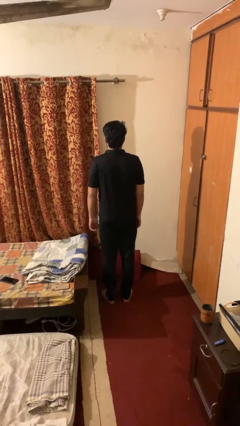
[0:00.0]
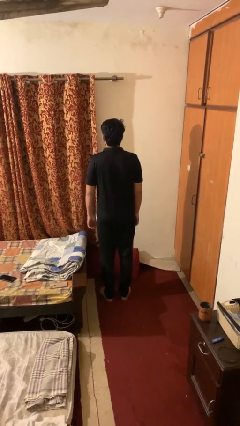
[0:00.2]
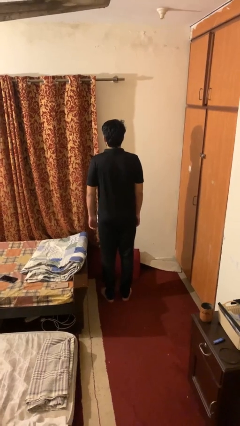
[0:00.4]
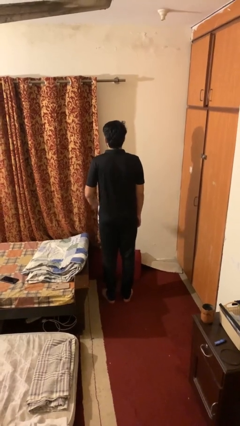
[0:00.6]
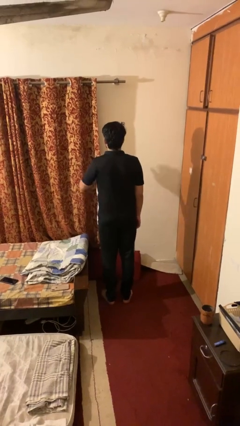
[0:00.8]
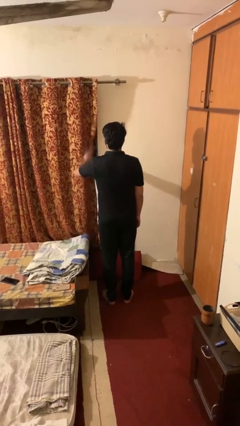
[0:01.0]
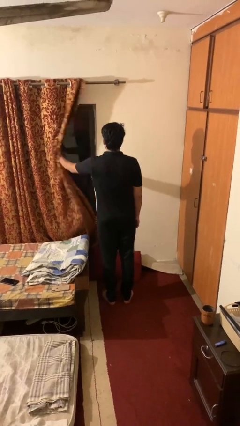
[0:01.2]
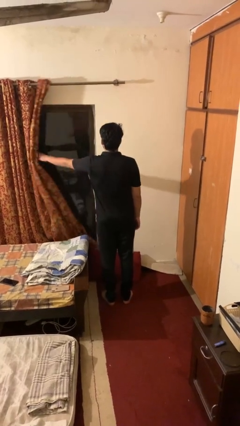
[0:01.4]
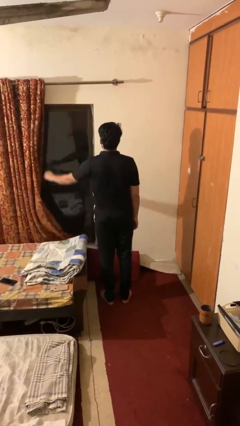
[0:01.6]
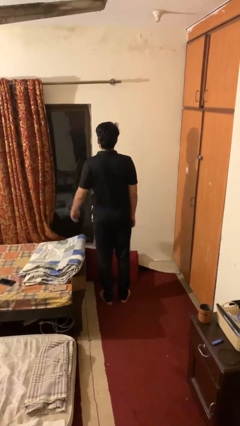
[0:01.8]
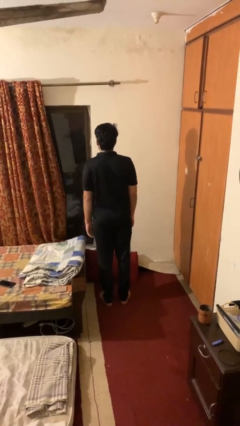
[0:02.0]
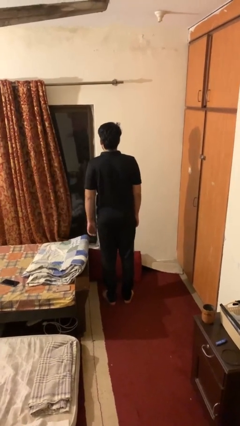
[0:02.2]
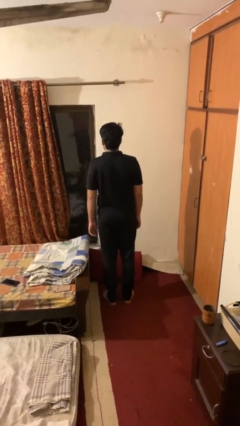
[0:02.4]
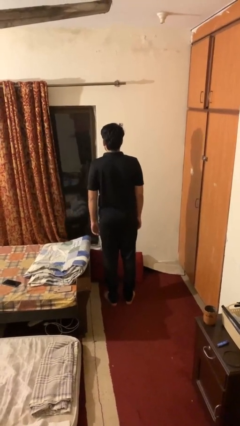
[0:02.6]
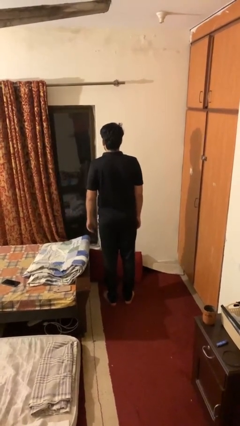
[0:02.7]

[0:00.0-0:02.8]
person opens curtains

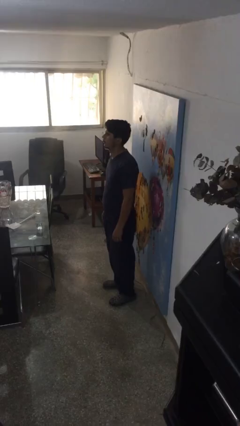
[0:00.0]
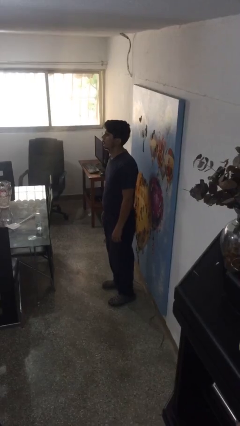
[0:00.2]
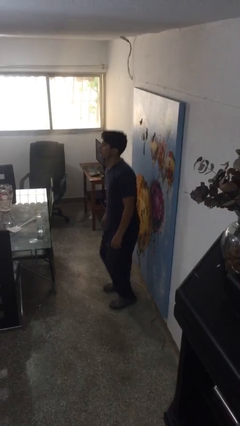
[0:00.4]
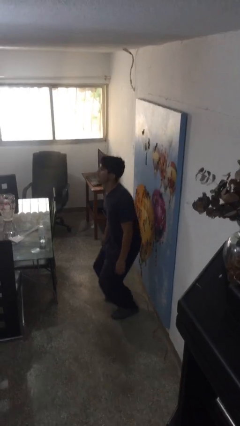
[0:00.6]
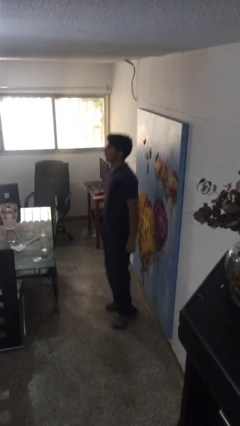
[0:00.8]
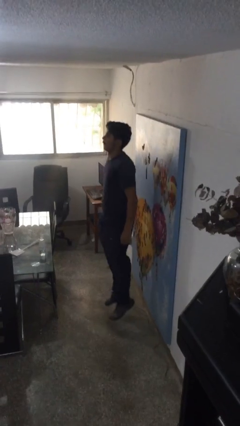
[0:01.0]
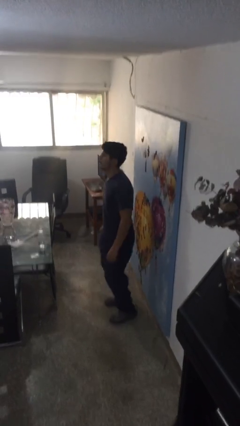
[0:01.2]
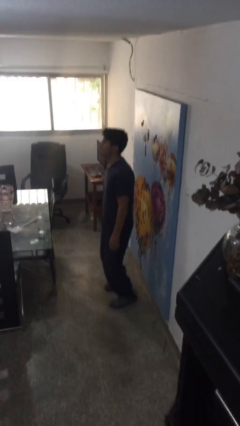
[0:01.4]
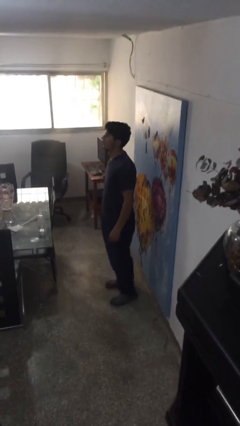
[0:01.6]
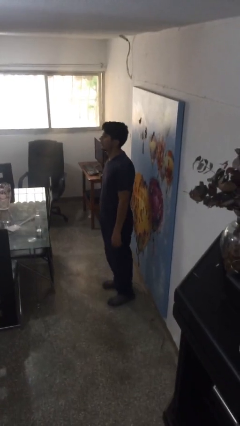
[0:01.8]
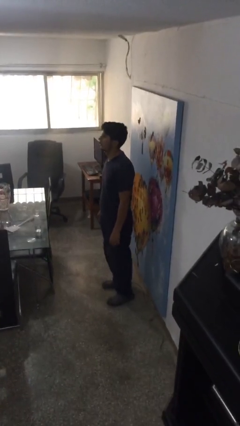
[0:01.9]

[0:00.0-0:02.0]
person jumps

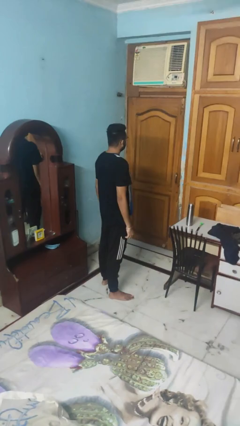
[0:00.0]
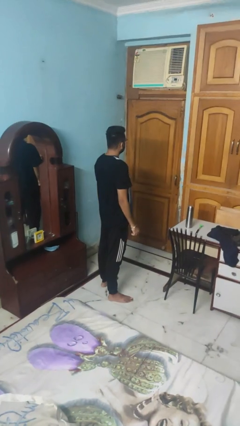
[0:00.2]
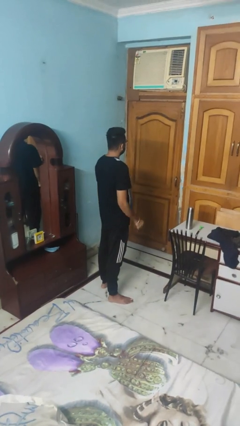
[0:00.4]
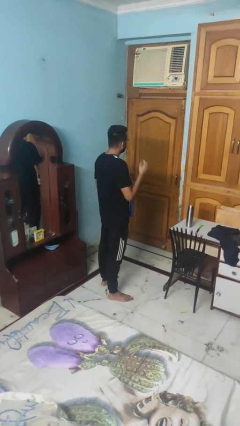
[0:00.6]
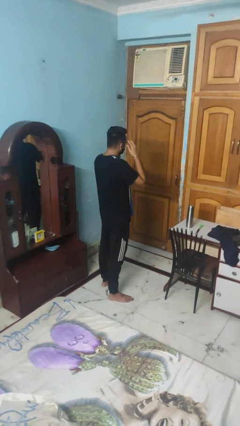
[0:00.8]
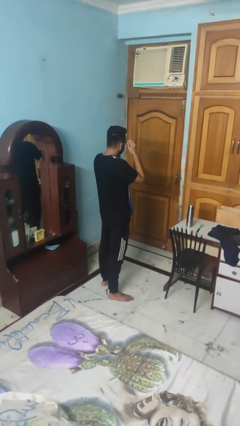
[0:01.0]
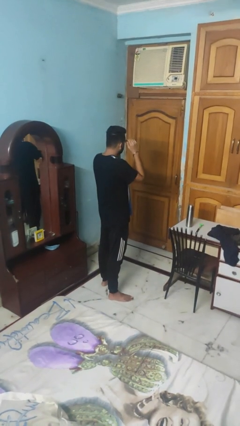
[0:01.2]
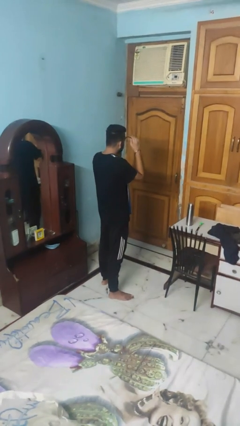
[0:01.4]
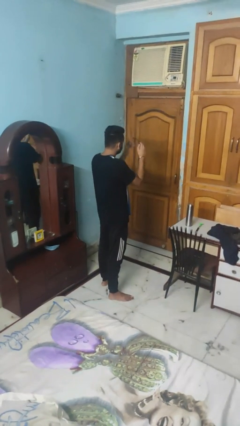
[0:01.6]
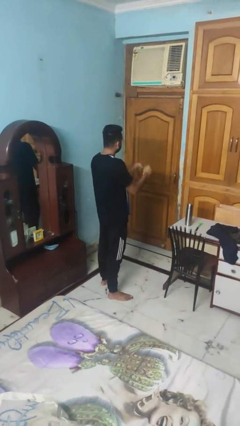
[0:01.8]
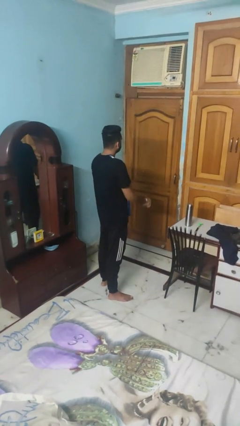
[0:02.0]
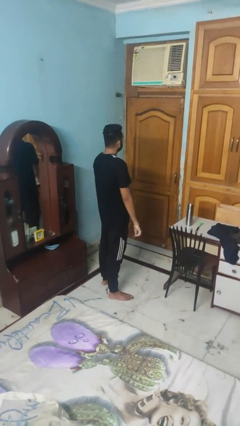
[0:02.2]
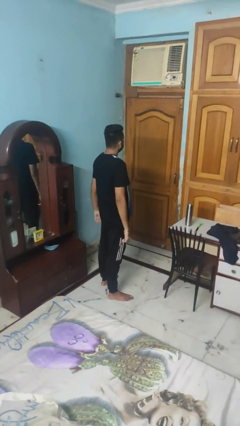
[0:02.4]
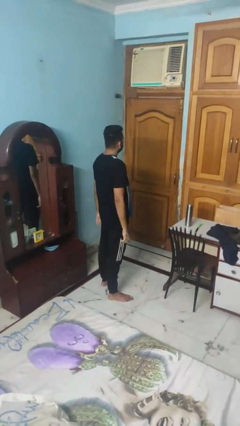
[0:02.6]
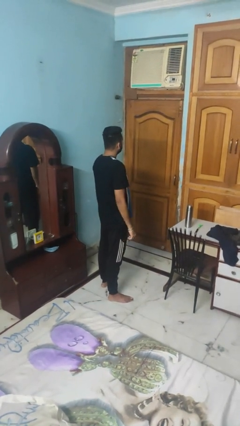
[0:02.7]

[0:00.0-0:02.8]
person takes off glasses

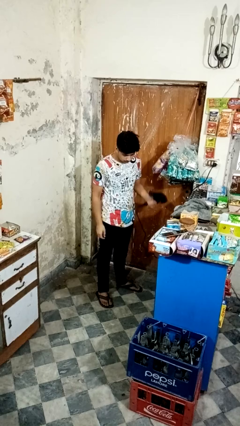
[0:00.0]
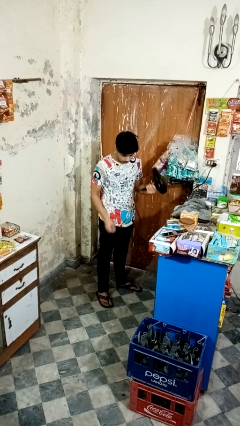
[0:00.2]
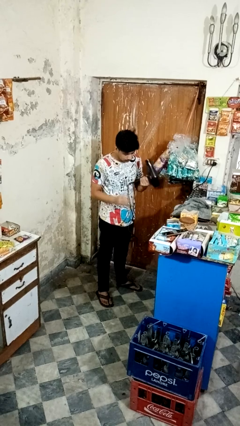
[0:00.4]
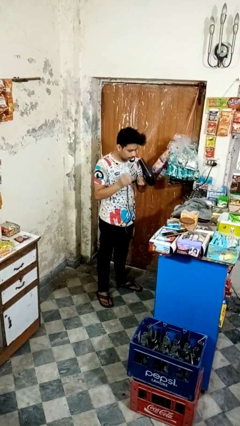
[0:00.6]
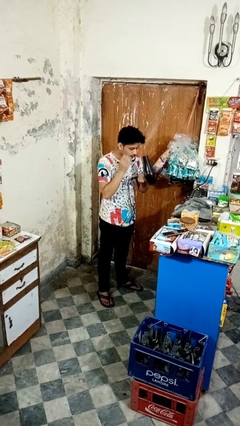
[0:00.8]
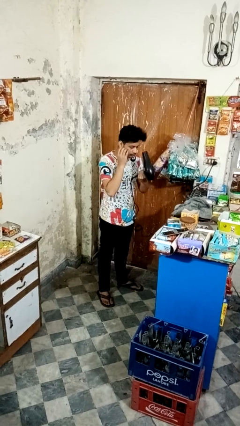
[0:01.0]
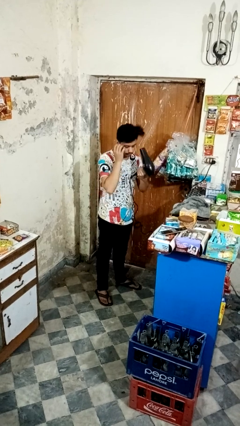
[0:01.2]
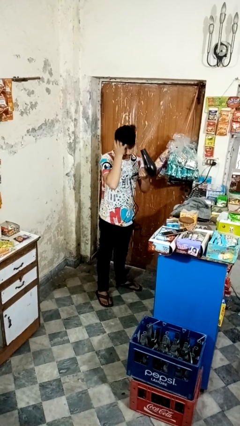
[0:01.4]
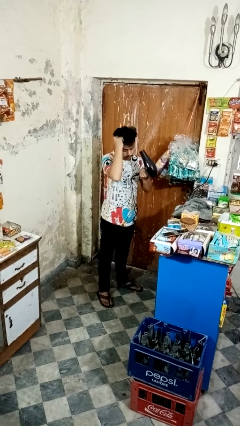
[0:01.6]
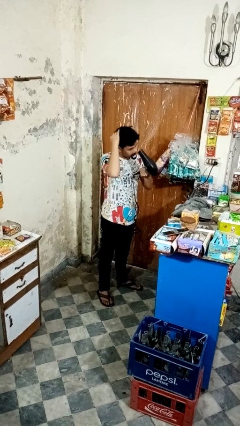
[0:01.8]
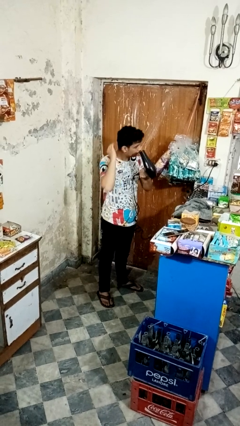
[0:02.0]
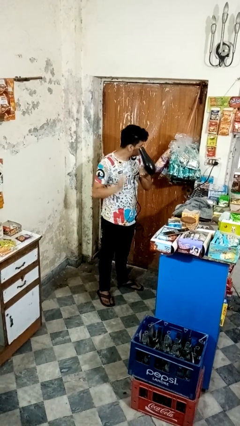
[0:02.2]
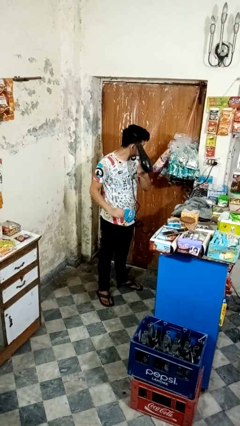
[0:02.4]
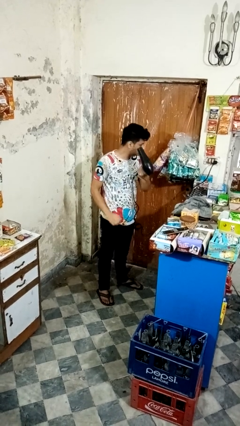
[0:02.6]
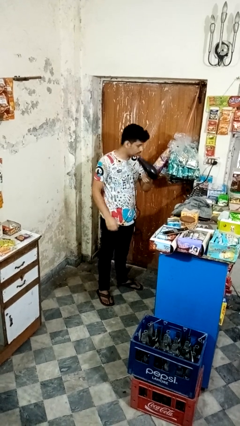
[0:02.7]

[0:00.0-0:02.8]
person dries hair with hairdryer

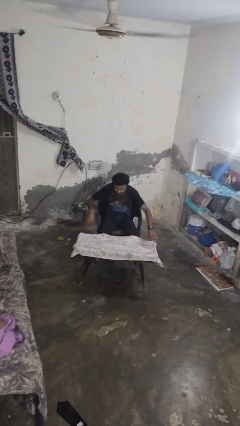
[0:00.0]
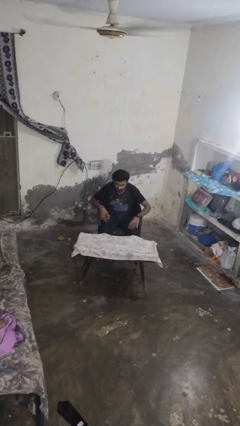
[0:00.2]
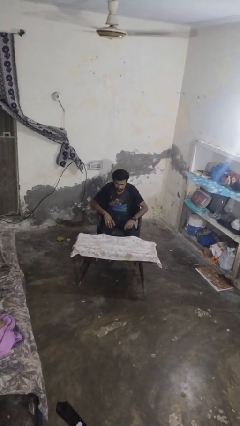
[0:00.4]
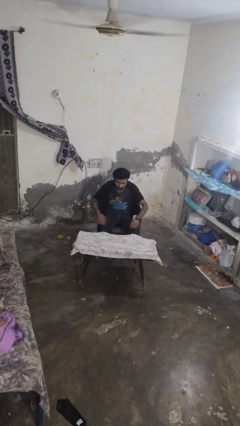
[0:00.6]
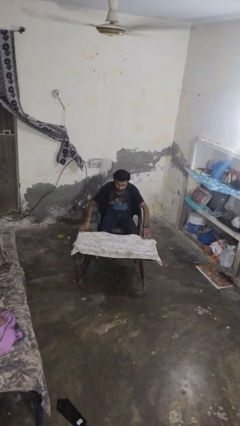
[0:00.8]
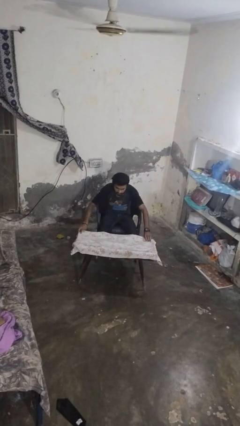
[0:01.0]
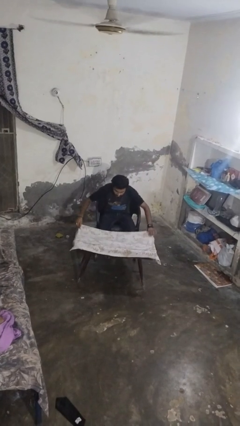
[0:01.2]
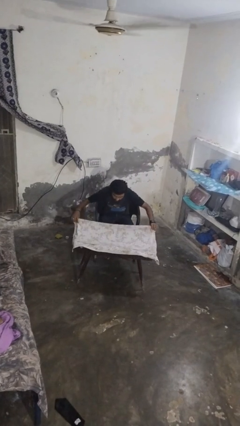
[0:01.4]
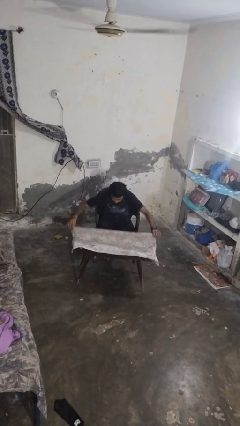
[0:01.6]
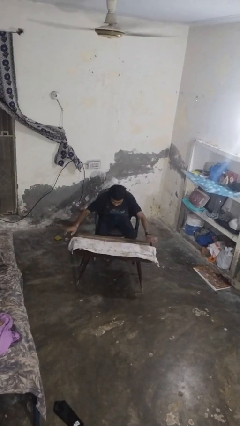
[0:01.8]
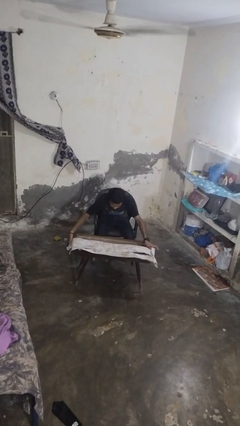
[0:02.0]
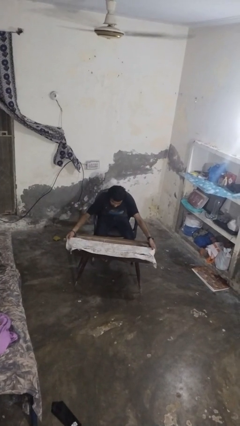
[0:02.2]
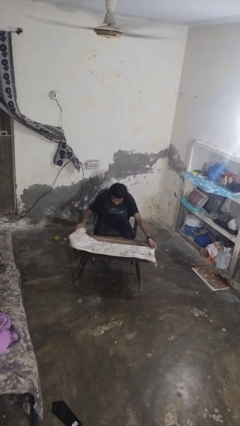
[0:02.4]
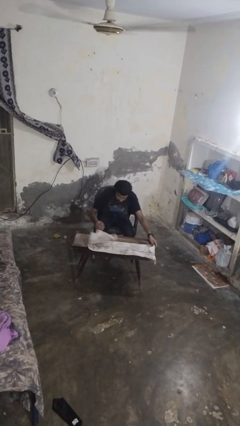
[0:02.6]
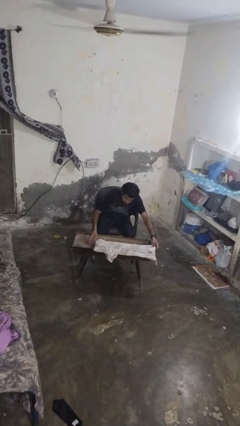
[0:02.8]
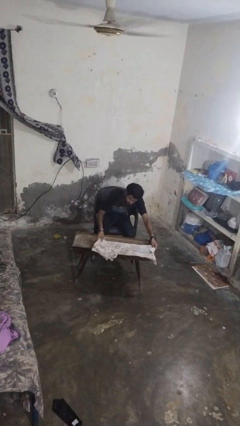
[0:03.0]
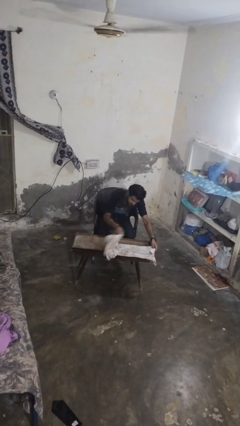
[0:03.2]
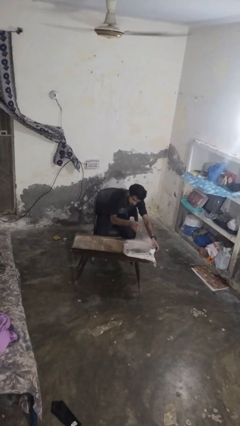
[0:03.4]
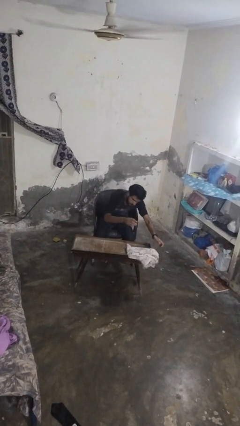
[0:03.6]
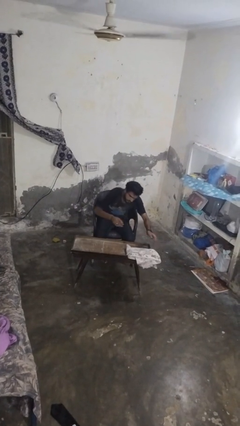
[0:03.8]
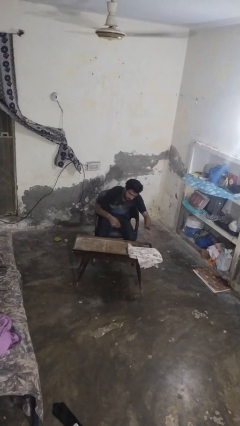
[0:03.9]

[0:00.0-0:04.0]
person folds tablecloth

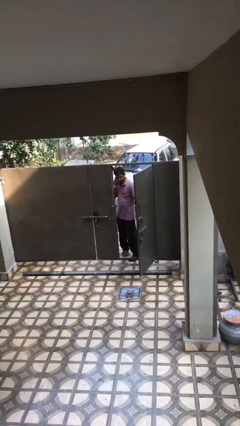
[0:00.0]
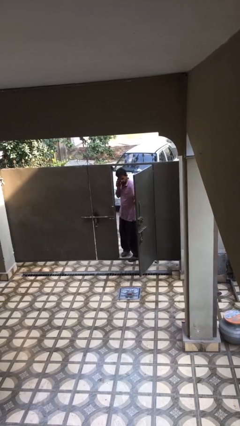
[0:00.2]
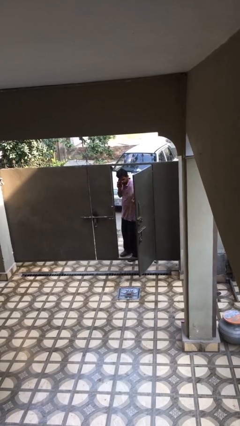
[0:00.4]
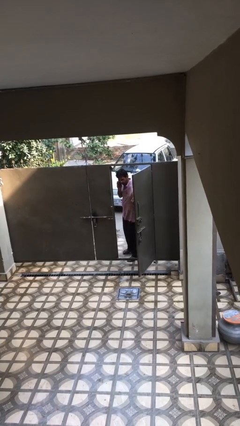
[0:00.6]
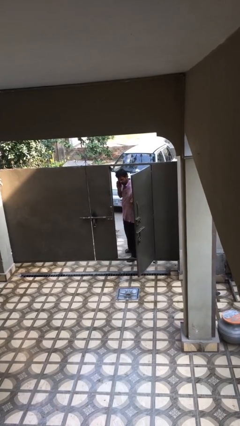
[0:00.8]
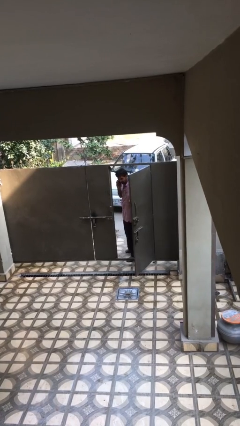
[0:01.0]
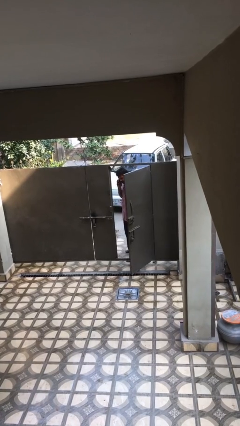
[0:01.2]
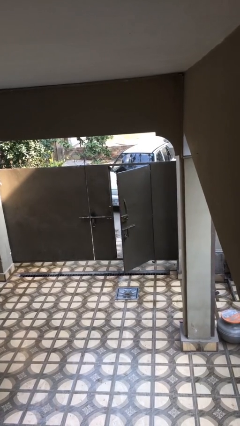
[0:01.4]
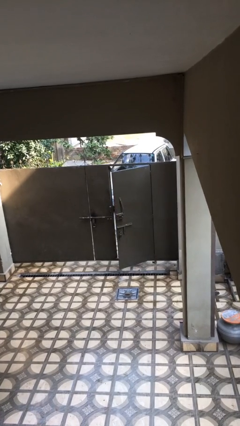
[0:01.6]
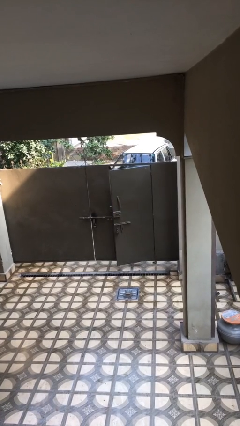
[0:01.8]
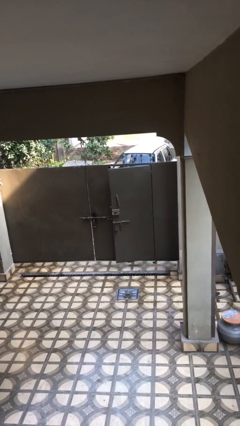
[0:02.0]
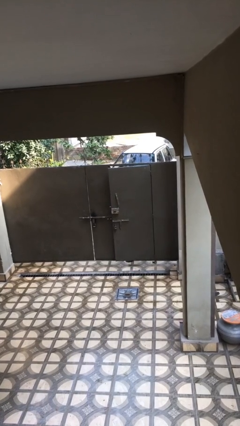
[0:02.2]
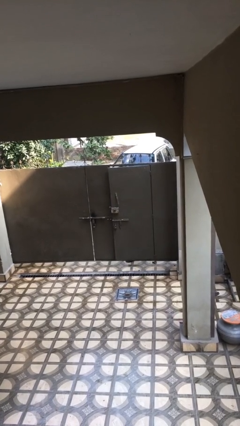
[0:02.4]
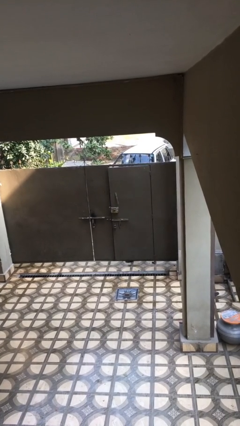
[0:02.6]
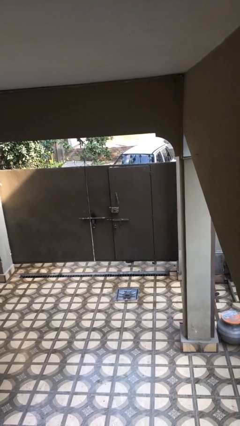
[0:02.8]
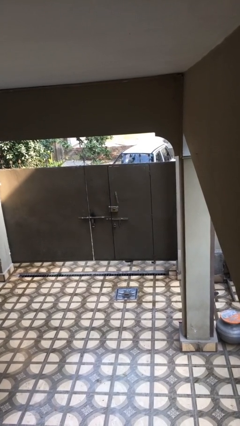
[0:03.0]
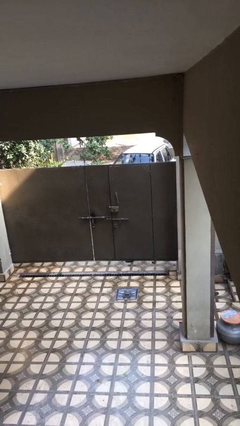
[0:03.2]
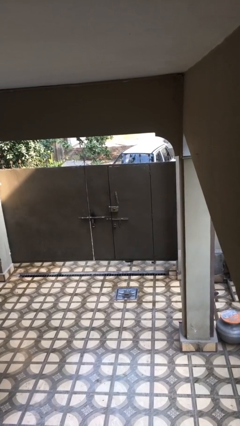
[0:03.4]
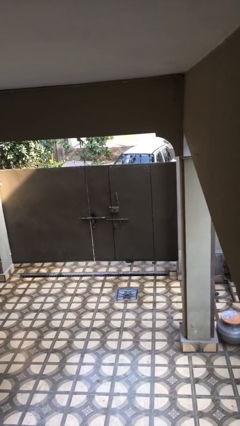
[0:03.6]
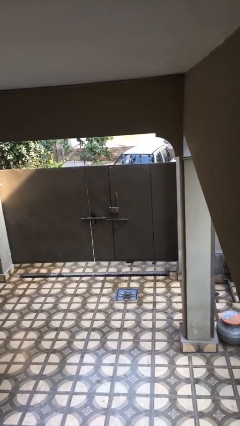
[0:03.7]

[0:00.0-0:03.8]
person closes facility door
